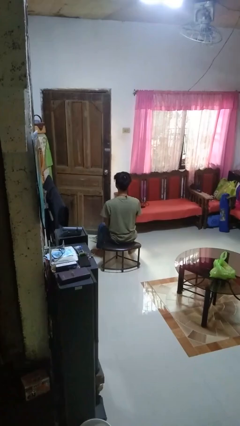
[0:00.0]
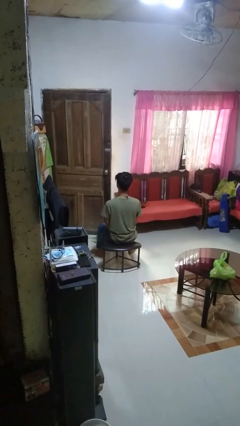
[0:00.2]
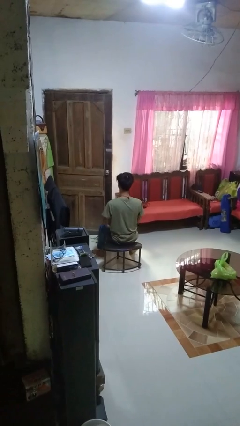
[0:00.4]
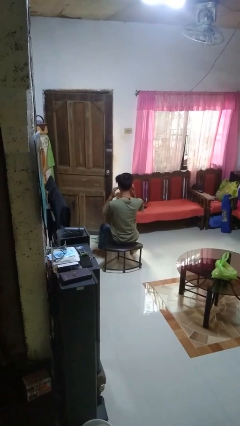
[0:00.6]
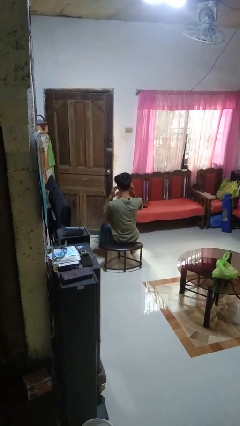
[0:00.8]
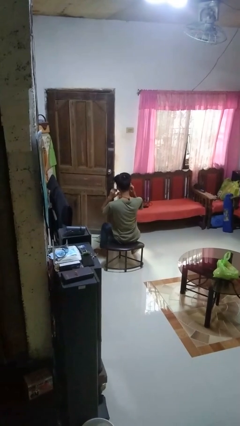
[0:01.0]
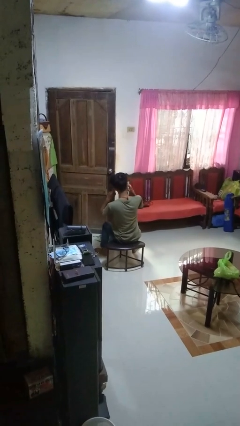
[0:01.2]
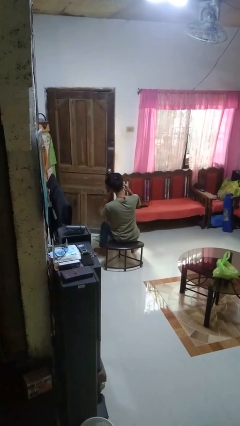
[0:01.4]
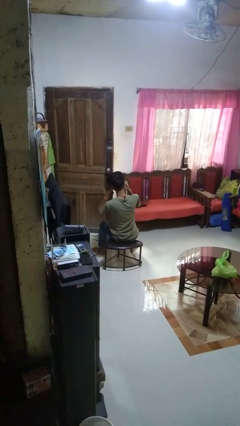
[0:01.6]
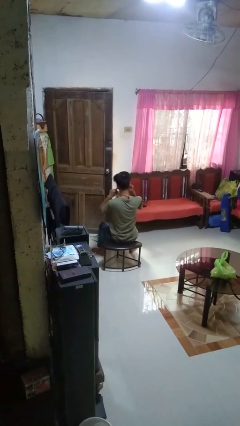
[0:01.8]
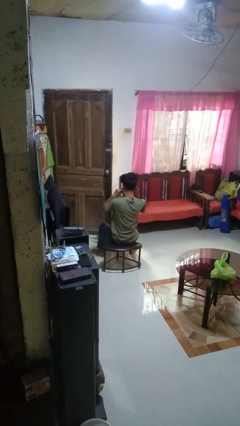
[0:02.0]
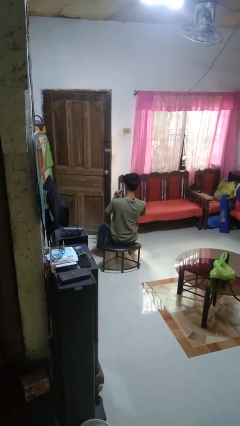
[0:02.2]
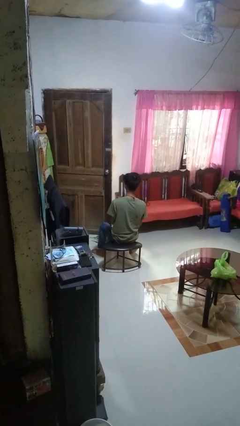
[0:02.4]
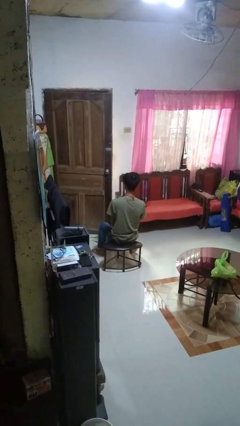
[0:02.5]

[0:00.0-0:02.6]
person puts fingers in ear

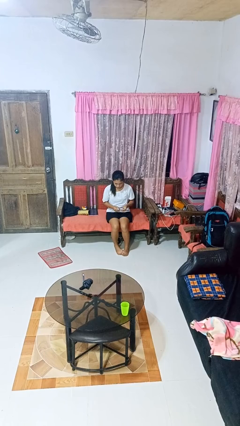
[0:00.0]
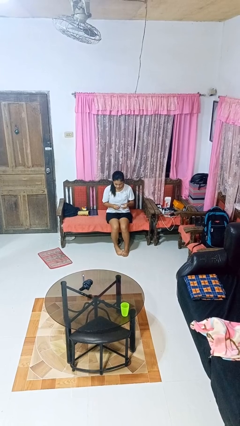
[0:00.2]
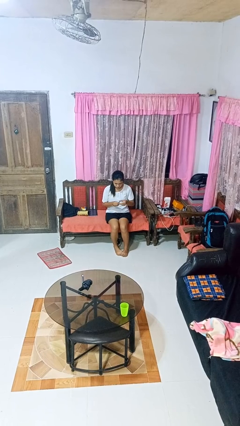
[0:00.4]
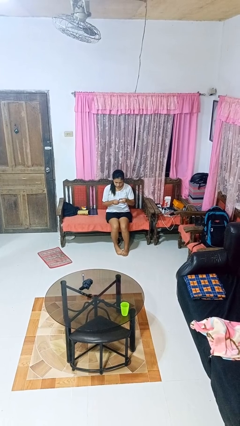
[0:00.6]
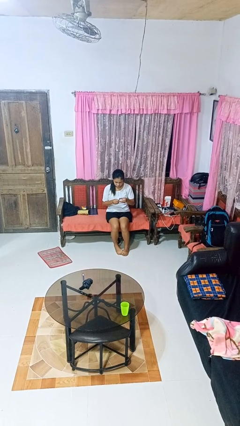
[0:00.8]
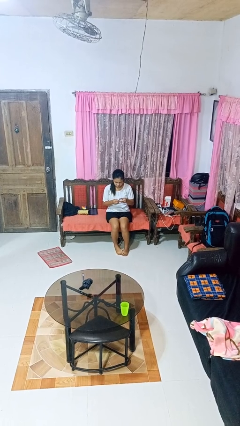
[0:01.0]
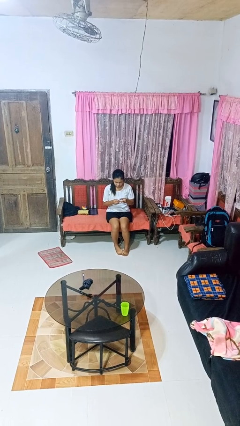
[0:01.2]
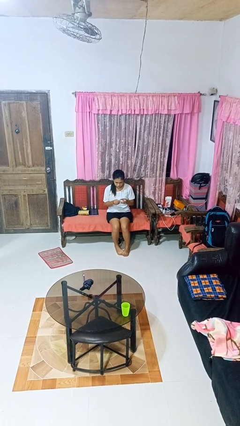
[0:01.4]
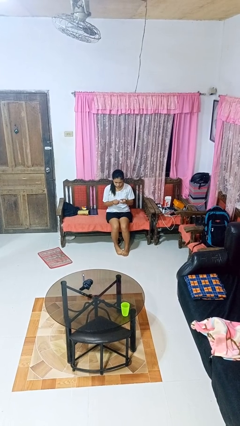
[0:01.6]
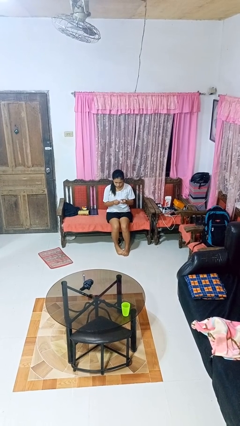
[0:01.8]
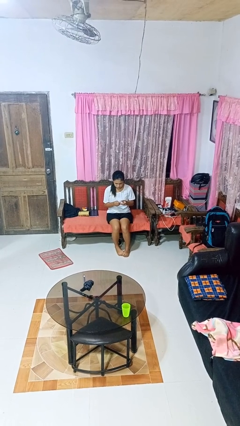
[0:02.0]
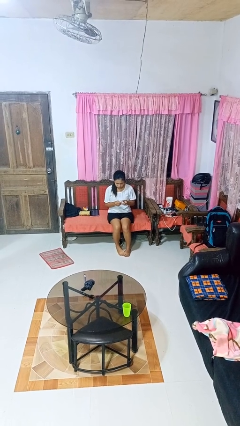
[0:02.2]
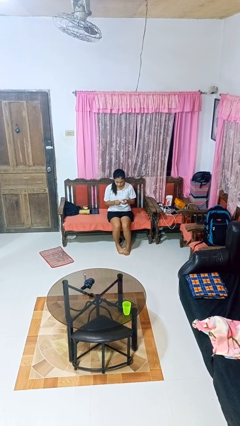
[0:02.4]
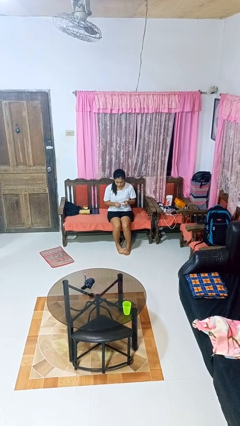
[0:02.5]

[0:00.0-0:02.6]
person clips fingernails

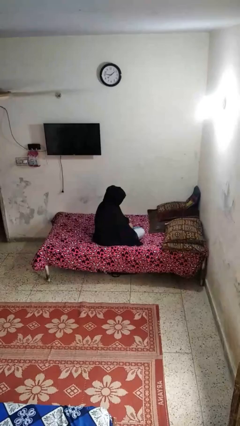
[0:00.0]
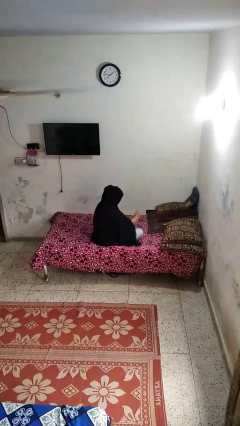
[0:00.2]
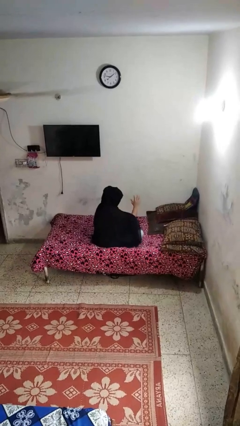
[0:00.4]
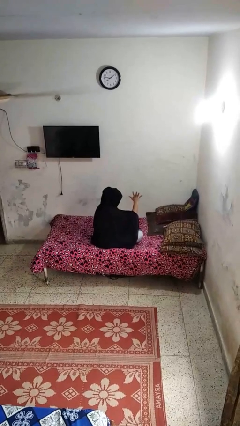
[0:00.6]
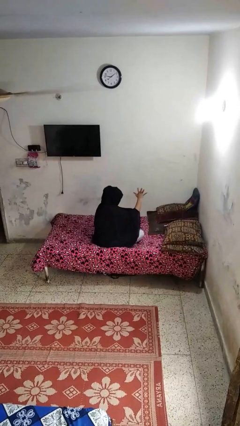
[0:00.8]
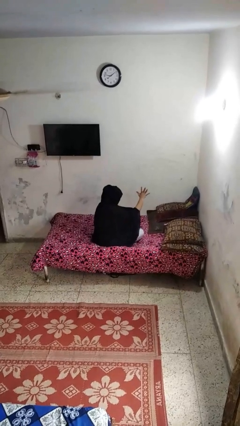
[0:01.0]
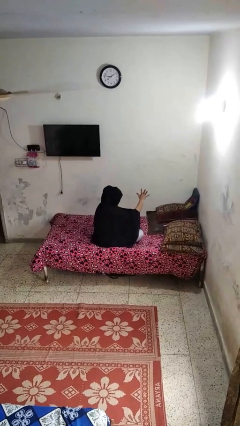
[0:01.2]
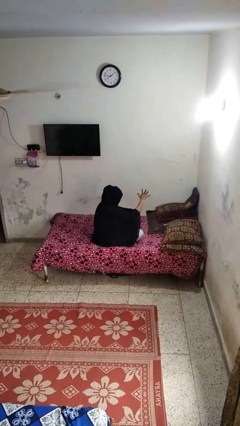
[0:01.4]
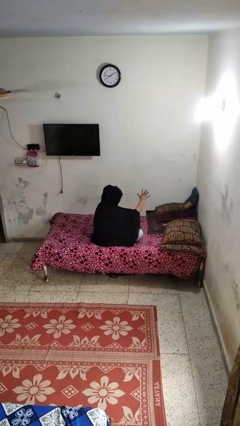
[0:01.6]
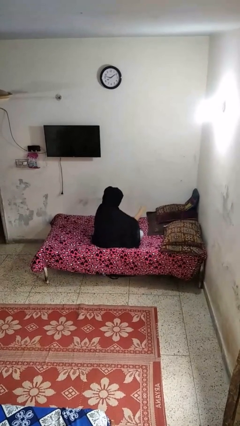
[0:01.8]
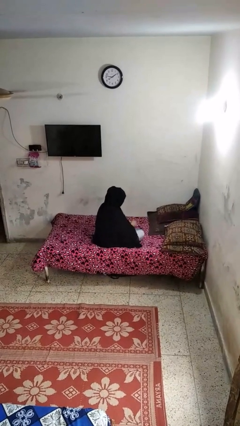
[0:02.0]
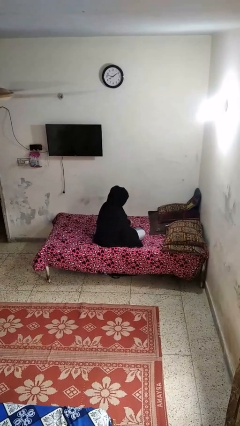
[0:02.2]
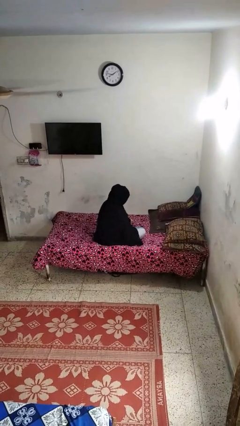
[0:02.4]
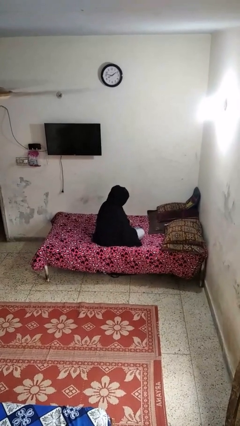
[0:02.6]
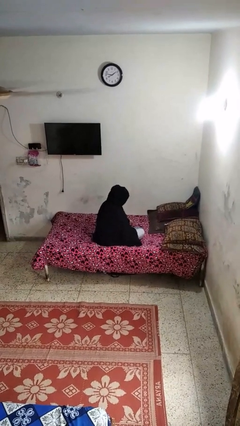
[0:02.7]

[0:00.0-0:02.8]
person gestures number five

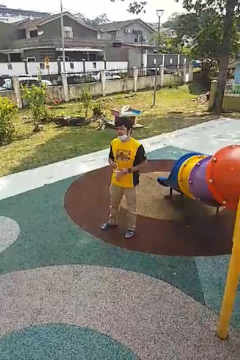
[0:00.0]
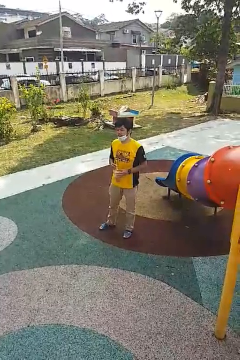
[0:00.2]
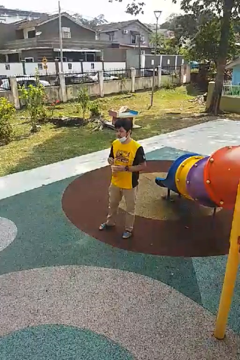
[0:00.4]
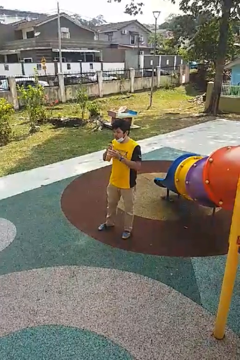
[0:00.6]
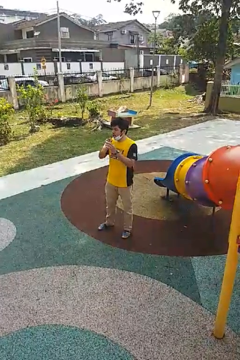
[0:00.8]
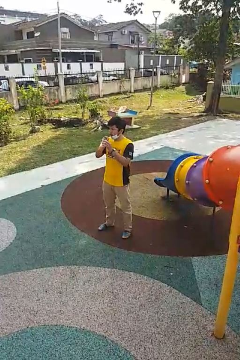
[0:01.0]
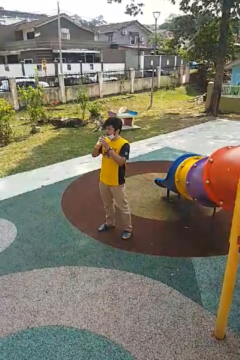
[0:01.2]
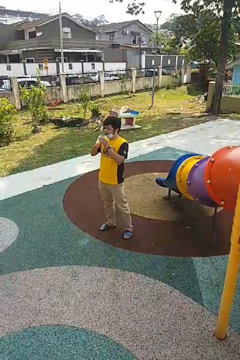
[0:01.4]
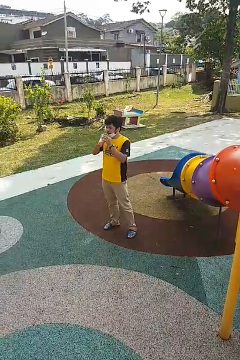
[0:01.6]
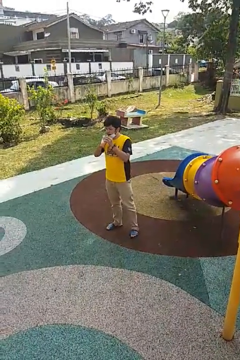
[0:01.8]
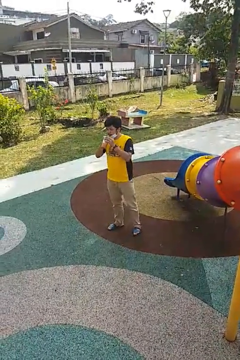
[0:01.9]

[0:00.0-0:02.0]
person drinks from straw

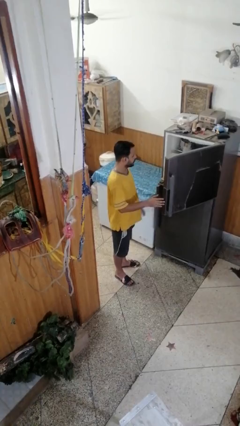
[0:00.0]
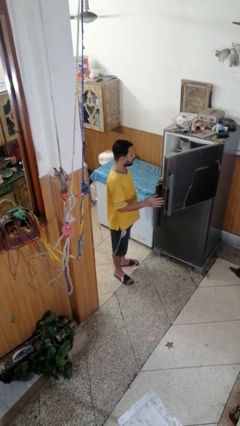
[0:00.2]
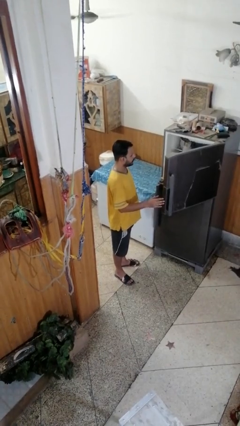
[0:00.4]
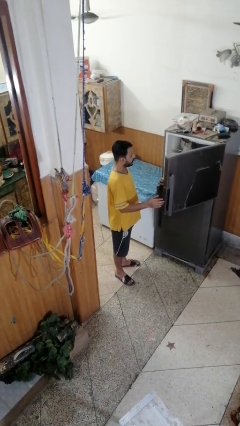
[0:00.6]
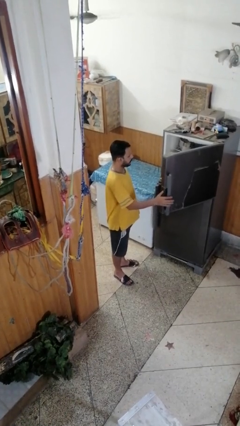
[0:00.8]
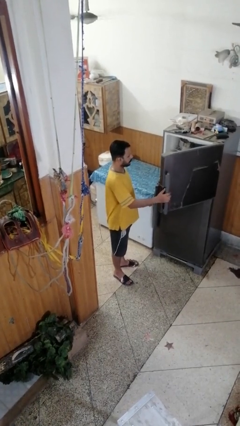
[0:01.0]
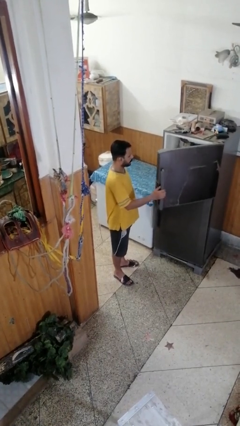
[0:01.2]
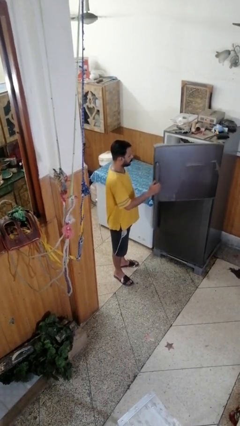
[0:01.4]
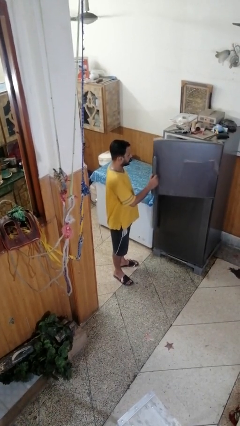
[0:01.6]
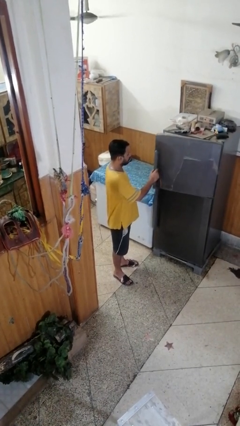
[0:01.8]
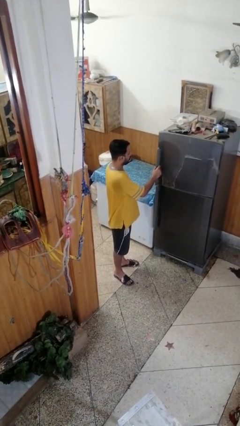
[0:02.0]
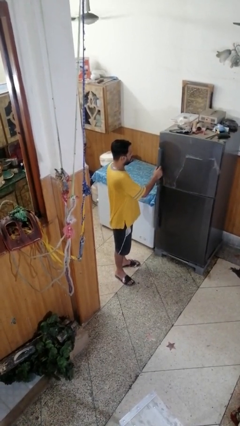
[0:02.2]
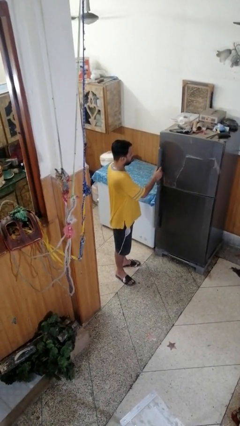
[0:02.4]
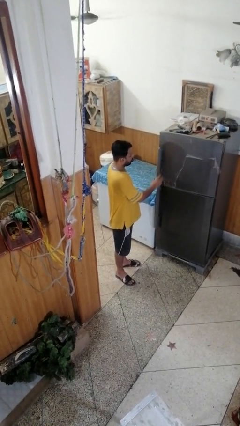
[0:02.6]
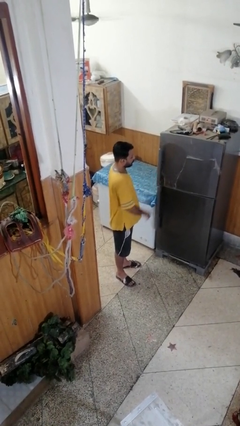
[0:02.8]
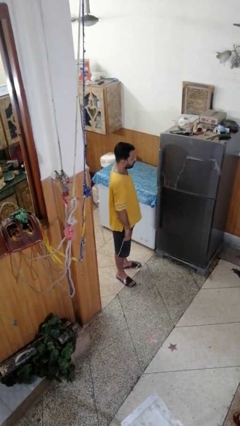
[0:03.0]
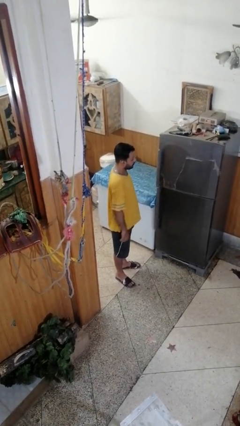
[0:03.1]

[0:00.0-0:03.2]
person closes refrigerator

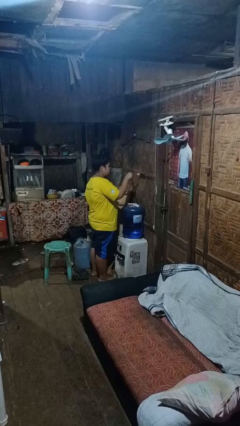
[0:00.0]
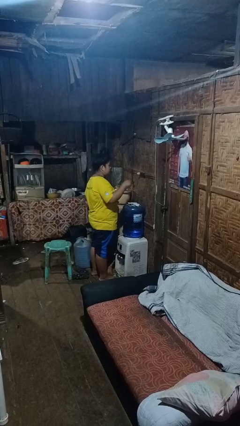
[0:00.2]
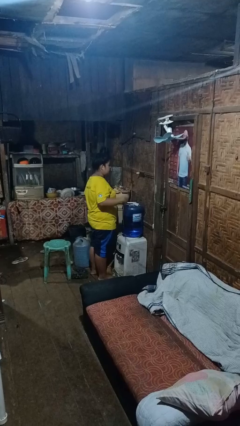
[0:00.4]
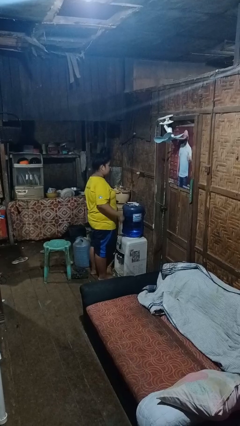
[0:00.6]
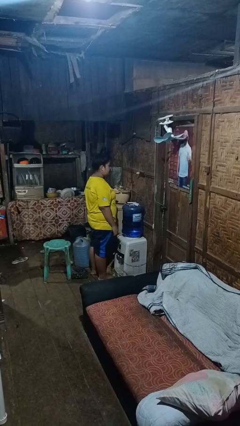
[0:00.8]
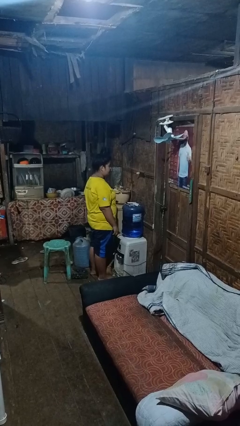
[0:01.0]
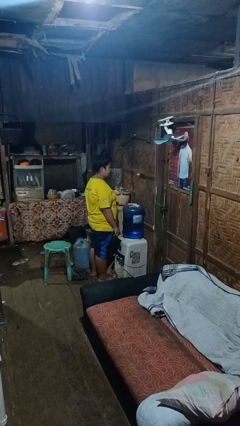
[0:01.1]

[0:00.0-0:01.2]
person unplugs from electrical socket

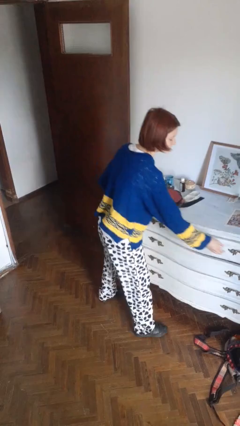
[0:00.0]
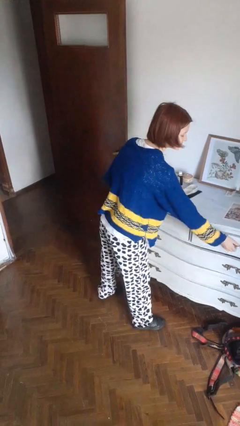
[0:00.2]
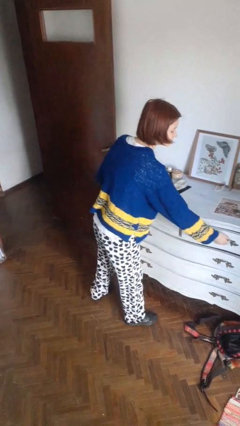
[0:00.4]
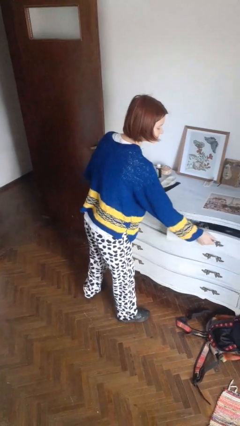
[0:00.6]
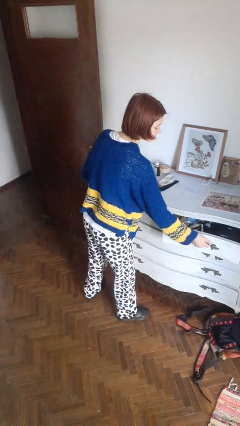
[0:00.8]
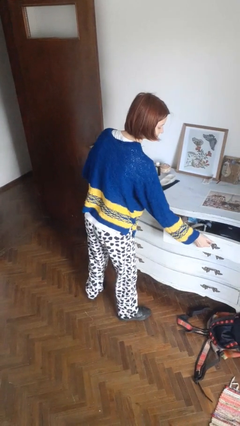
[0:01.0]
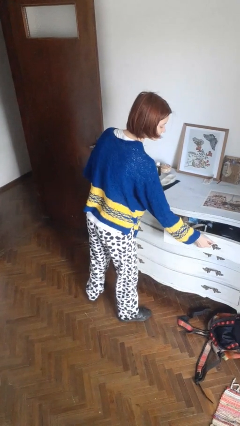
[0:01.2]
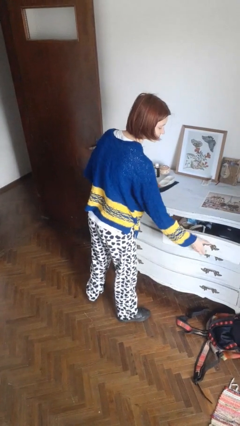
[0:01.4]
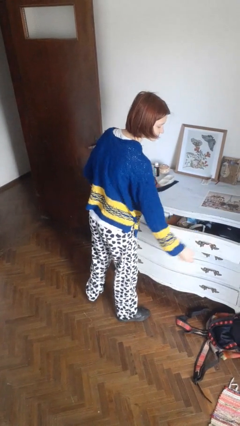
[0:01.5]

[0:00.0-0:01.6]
person opens dresser drawer

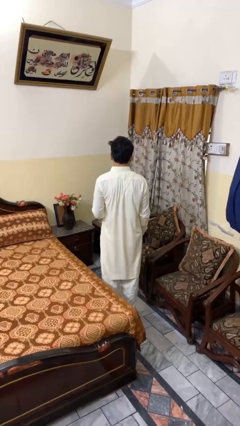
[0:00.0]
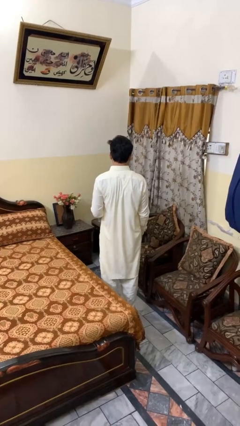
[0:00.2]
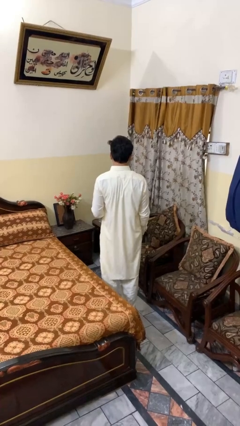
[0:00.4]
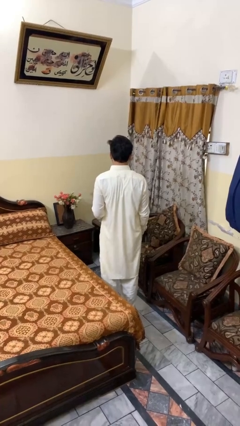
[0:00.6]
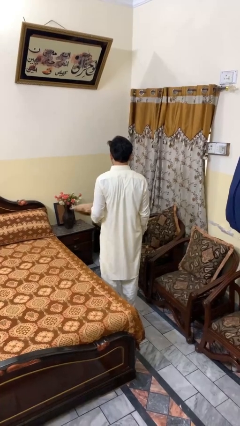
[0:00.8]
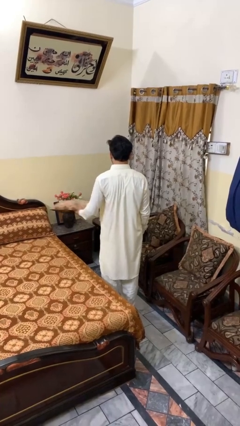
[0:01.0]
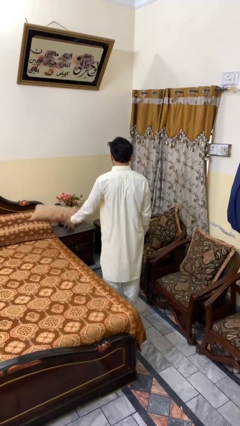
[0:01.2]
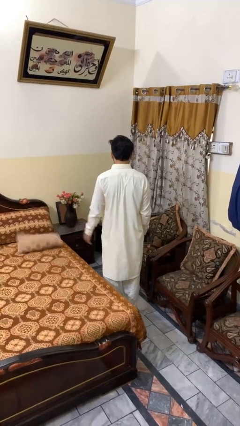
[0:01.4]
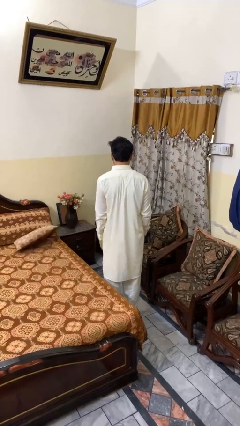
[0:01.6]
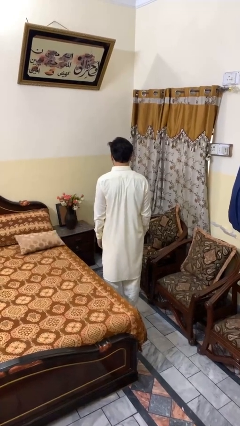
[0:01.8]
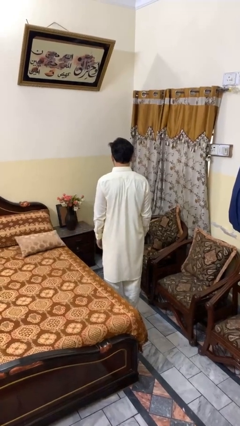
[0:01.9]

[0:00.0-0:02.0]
person throws object on bed
